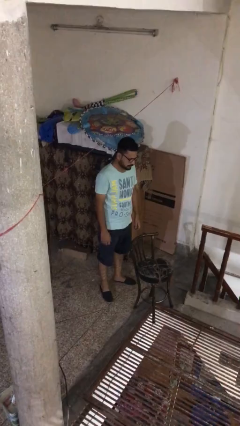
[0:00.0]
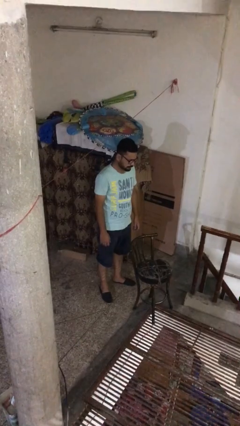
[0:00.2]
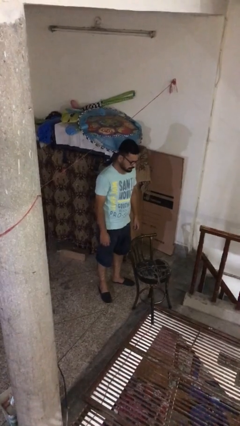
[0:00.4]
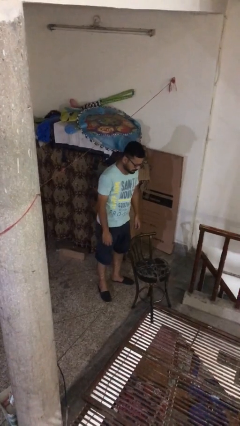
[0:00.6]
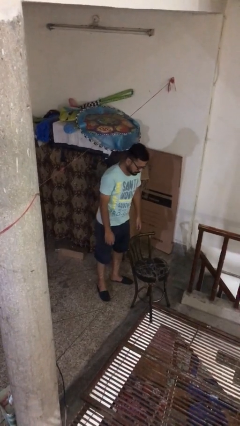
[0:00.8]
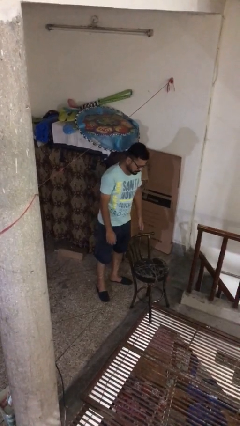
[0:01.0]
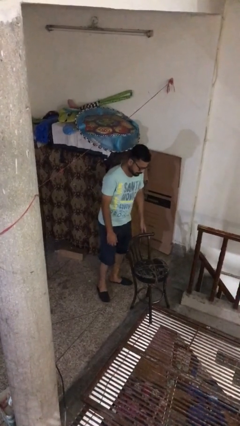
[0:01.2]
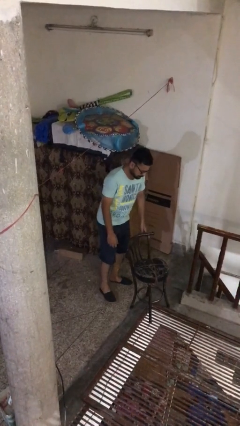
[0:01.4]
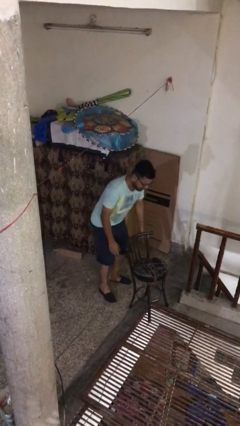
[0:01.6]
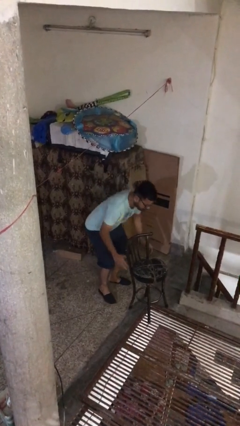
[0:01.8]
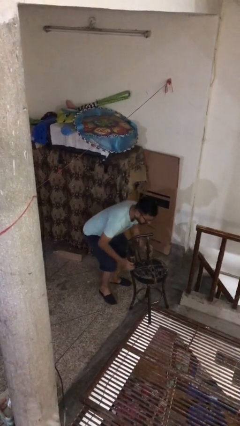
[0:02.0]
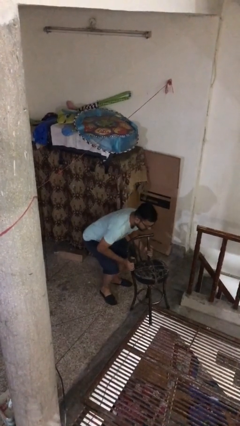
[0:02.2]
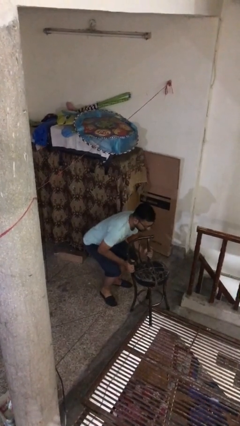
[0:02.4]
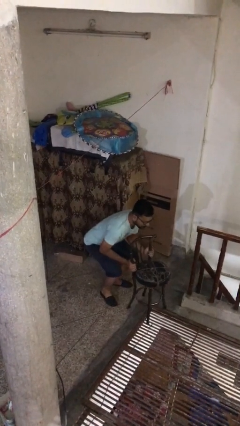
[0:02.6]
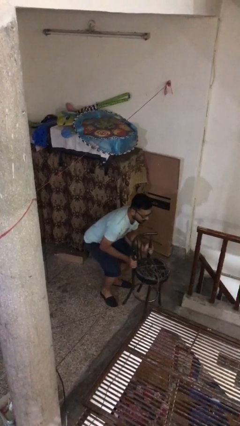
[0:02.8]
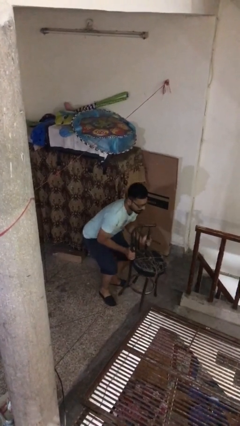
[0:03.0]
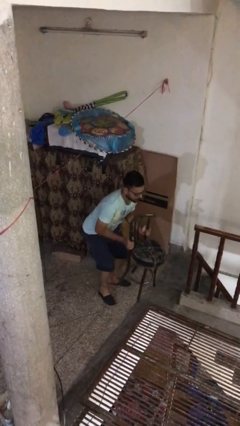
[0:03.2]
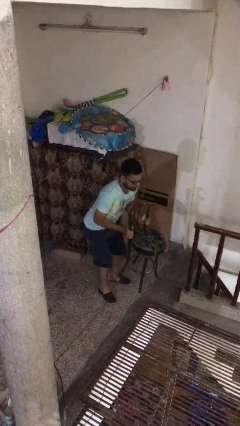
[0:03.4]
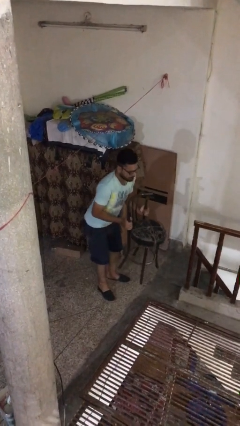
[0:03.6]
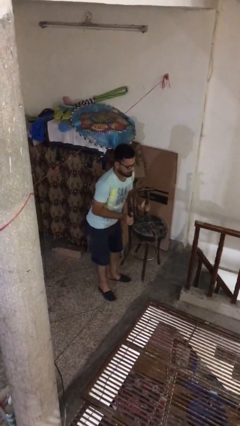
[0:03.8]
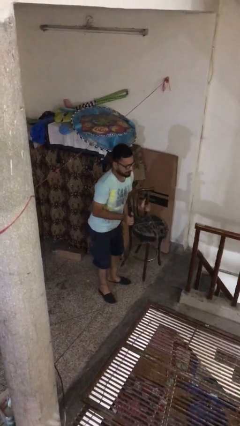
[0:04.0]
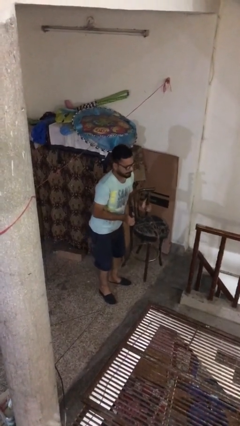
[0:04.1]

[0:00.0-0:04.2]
person picks up object from floor

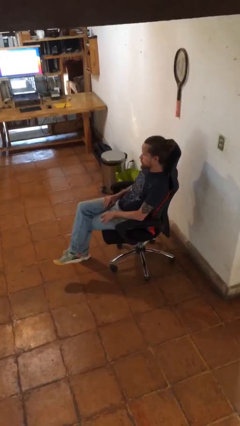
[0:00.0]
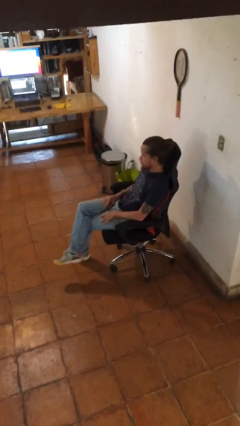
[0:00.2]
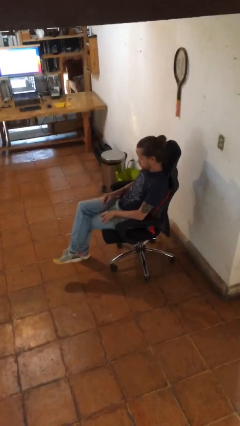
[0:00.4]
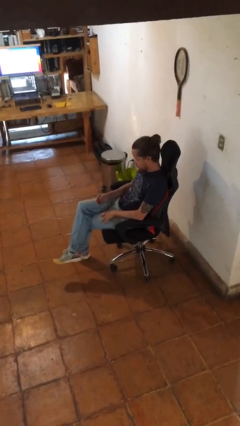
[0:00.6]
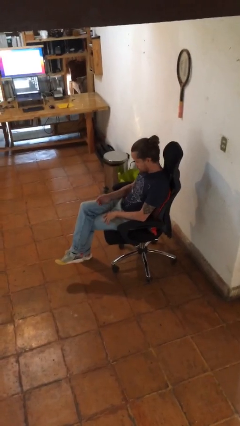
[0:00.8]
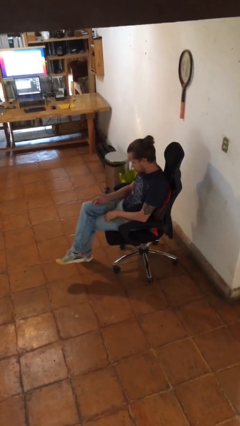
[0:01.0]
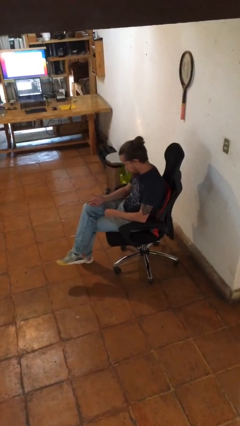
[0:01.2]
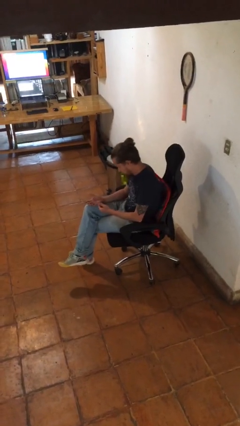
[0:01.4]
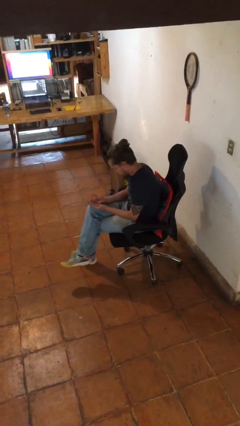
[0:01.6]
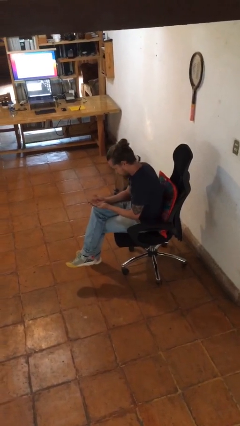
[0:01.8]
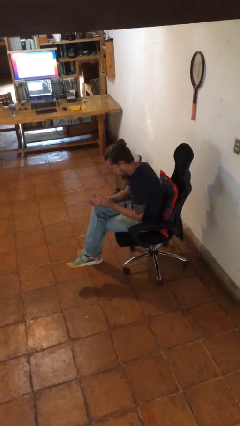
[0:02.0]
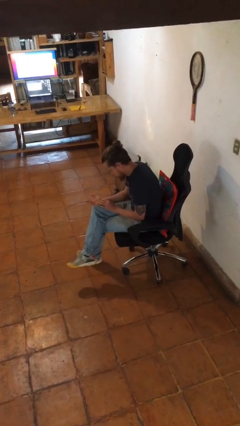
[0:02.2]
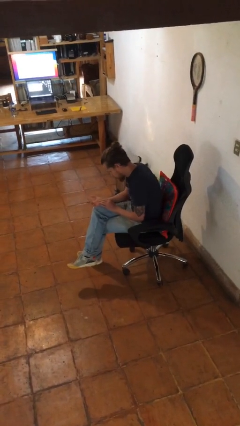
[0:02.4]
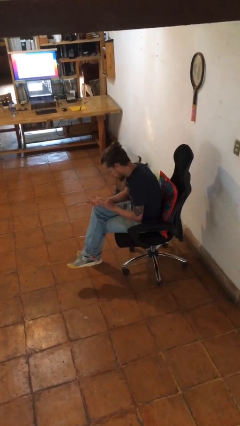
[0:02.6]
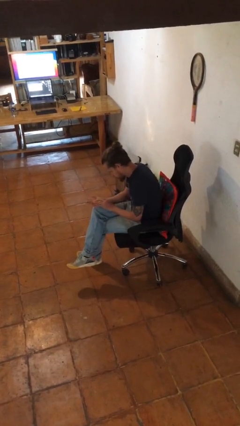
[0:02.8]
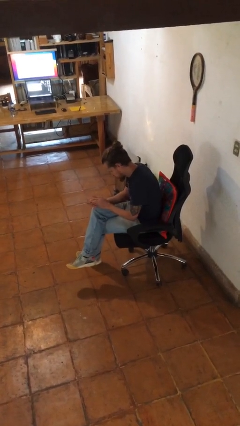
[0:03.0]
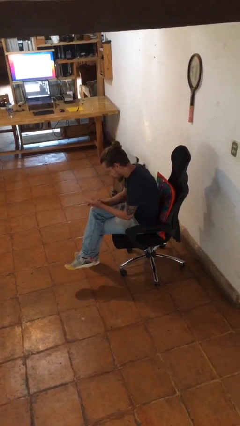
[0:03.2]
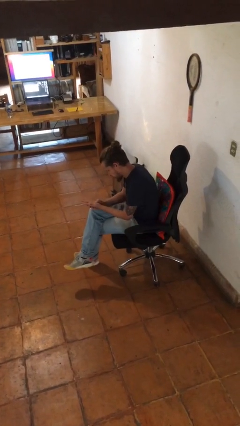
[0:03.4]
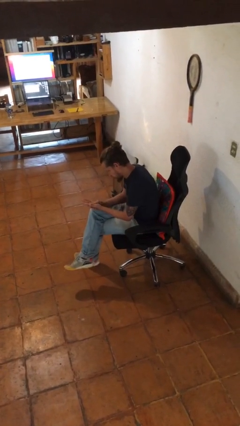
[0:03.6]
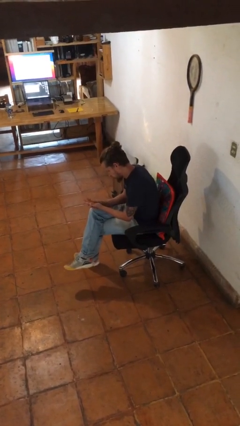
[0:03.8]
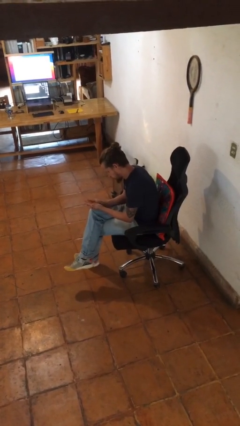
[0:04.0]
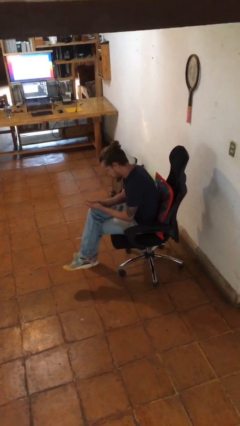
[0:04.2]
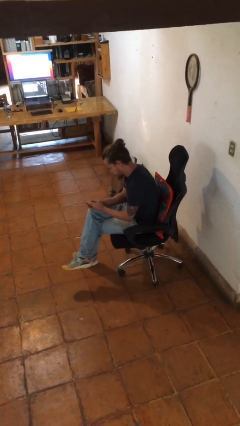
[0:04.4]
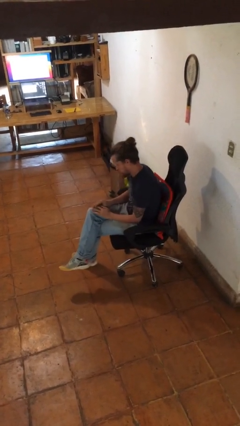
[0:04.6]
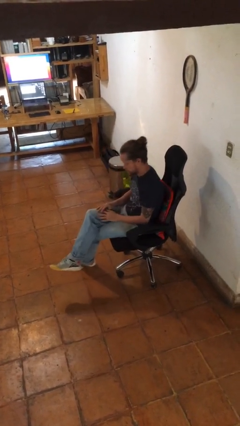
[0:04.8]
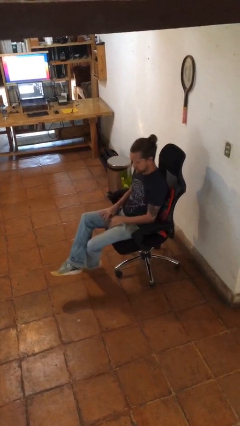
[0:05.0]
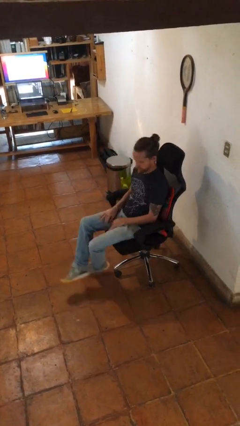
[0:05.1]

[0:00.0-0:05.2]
person looks at hands in lap

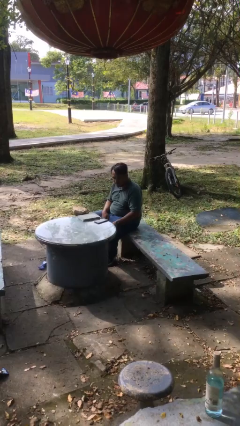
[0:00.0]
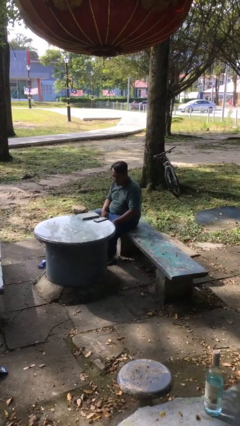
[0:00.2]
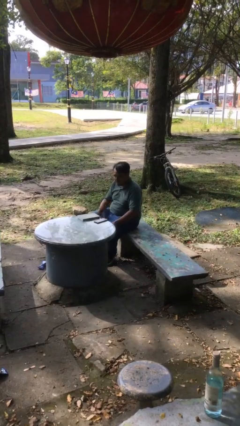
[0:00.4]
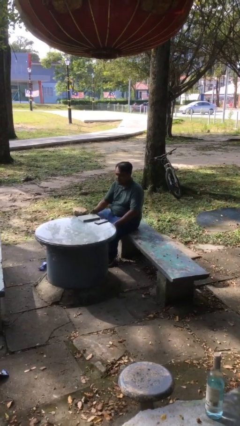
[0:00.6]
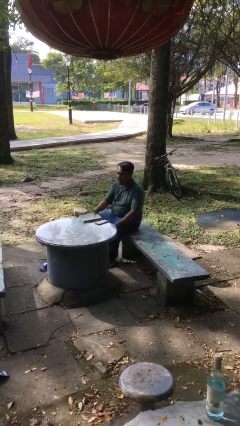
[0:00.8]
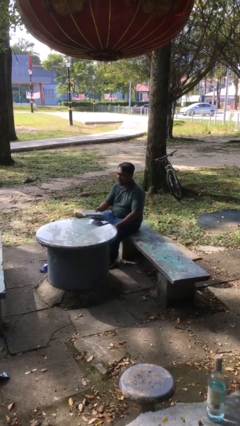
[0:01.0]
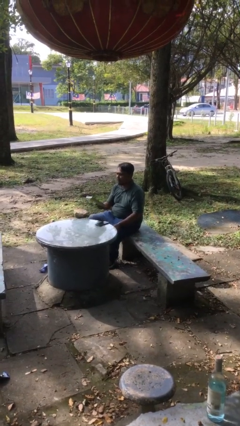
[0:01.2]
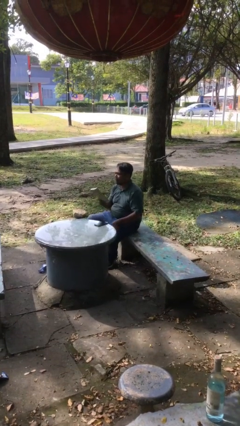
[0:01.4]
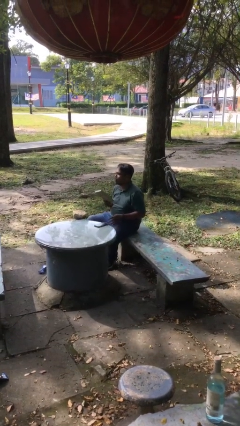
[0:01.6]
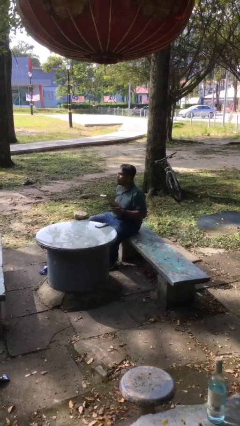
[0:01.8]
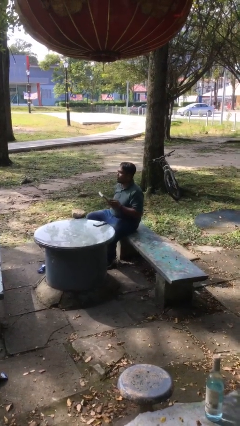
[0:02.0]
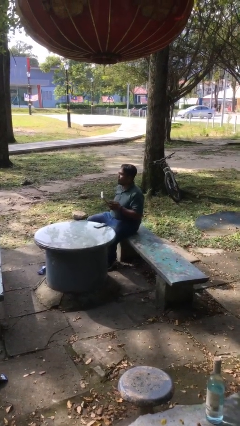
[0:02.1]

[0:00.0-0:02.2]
person picks up object from table

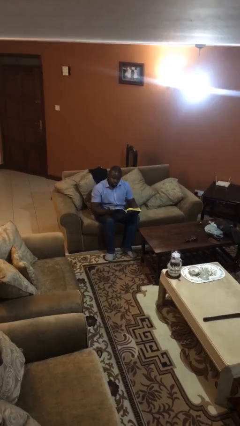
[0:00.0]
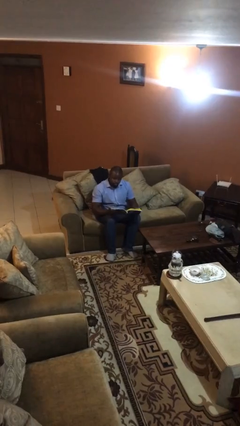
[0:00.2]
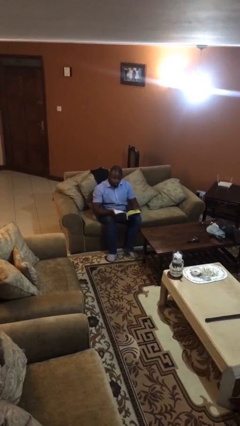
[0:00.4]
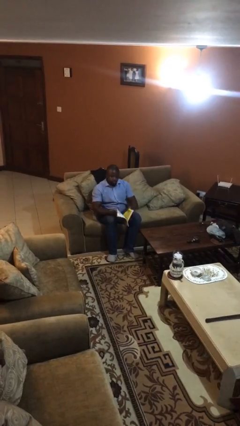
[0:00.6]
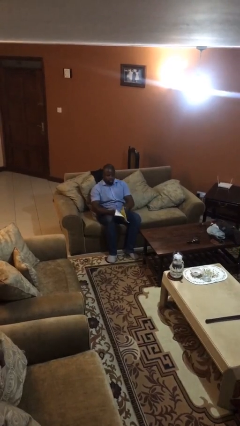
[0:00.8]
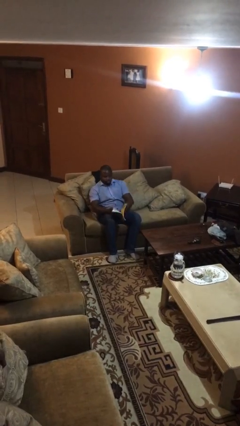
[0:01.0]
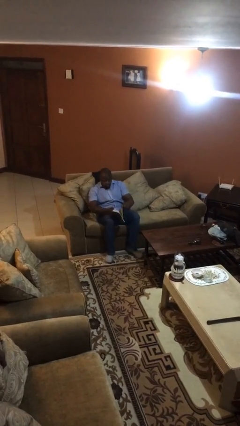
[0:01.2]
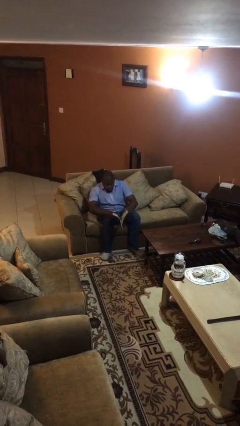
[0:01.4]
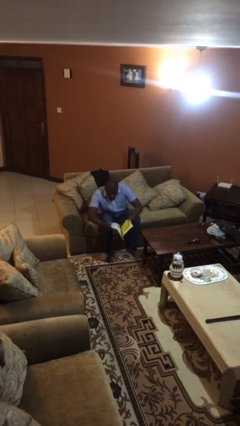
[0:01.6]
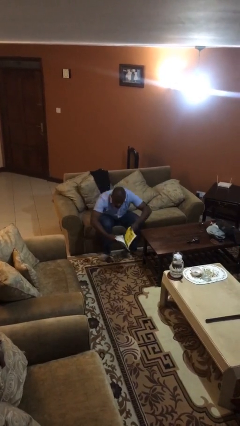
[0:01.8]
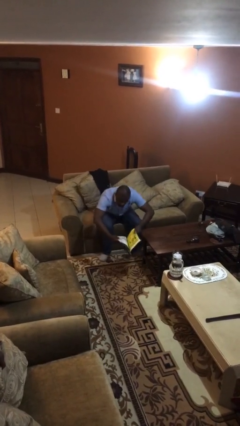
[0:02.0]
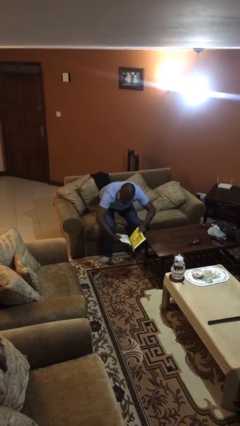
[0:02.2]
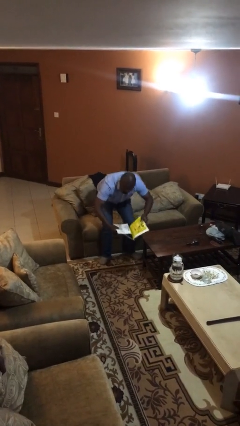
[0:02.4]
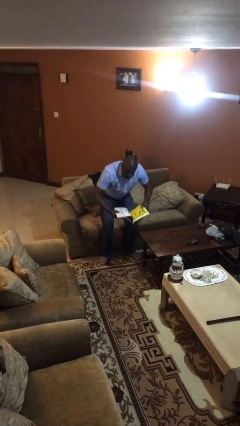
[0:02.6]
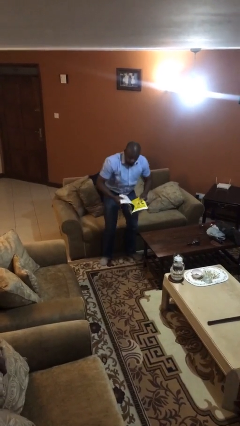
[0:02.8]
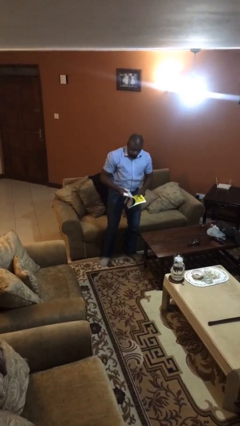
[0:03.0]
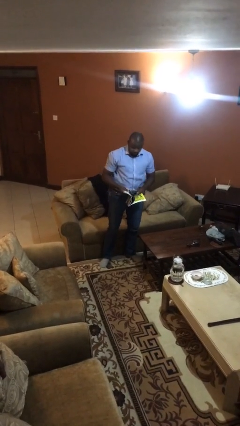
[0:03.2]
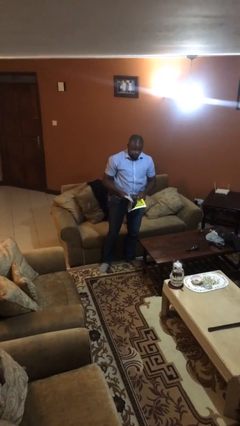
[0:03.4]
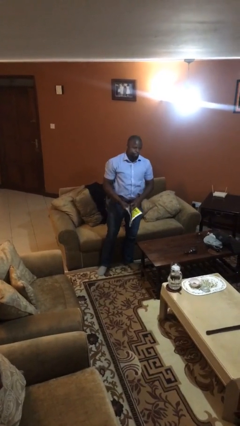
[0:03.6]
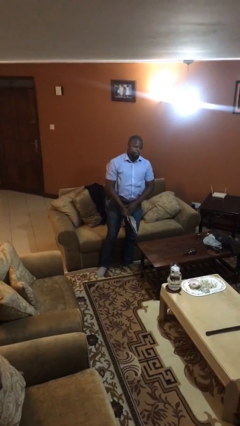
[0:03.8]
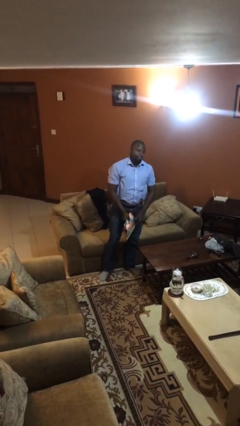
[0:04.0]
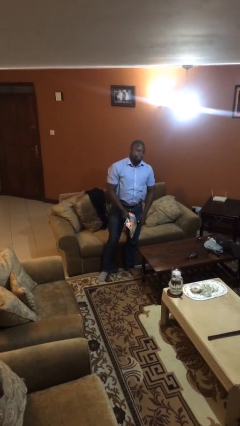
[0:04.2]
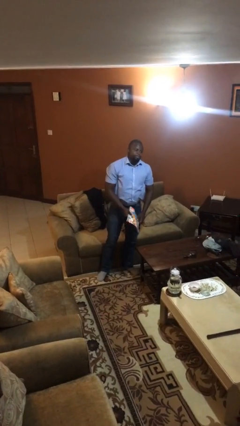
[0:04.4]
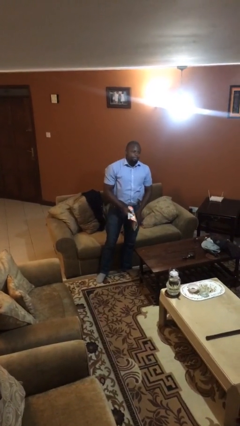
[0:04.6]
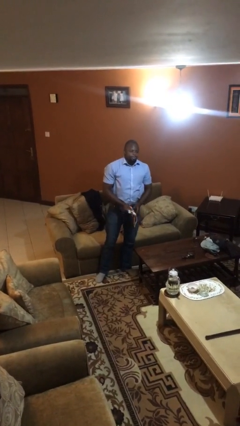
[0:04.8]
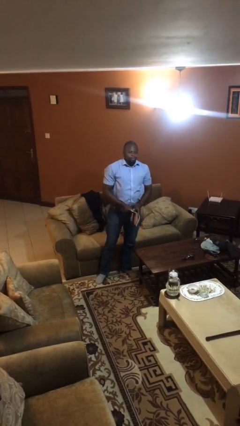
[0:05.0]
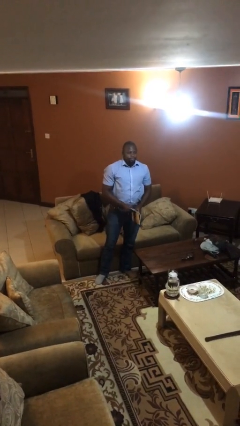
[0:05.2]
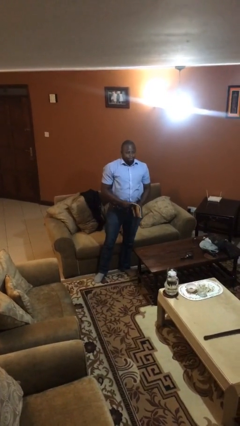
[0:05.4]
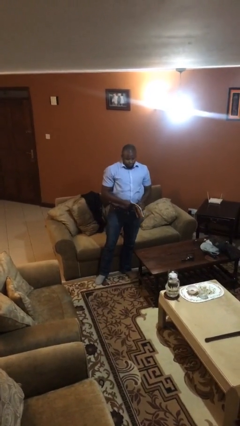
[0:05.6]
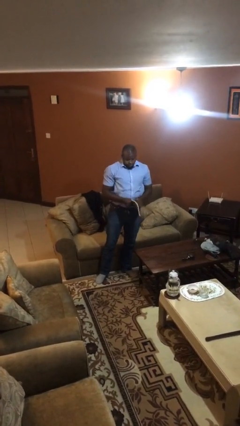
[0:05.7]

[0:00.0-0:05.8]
person stands up
